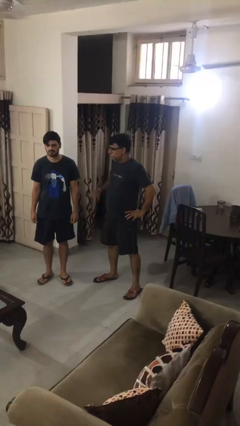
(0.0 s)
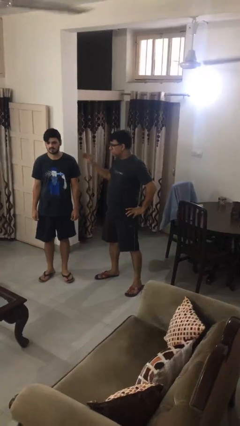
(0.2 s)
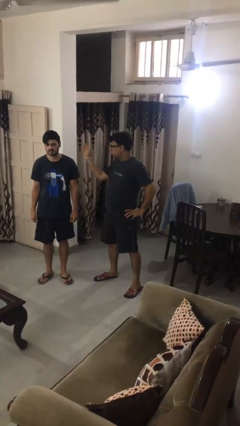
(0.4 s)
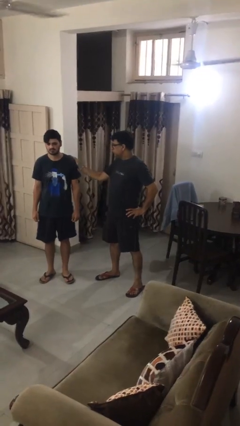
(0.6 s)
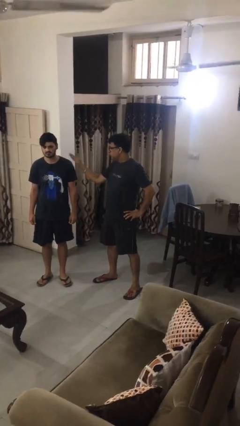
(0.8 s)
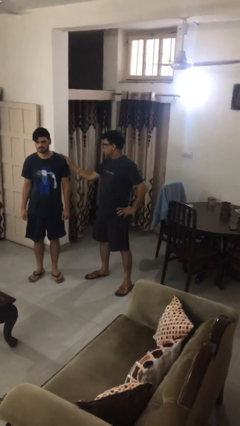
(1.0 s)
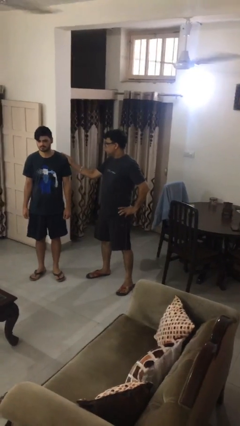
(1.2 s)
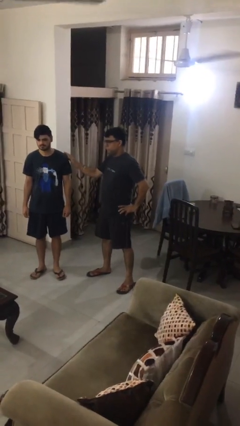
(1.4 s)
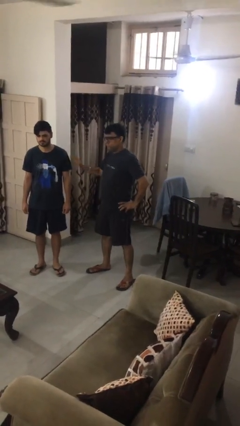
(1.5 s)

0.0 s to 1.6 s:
person pounds shoulders of person

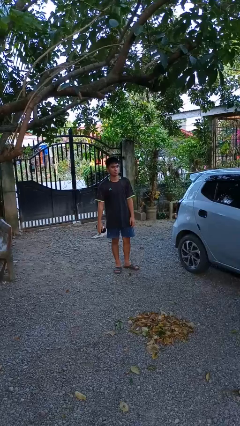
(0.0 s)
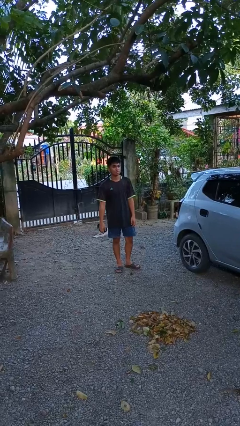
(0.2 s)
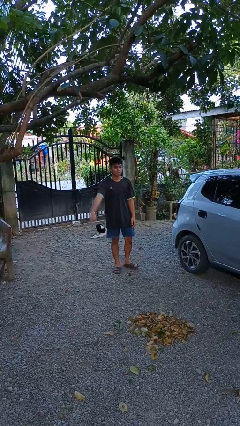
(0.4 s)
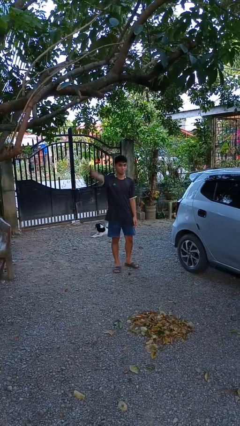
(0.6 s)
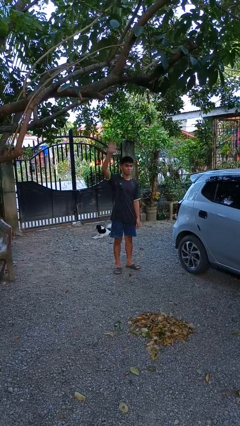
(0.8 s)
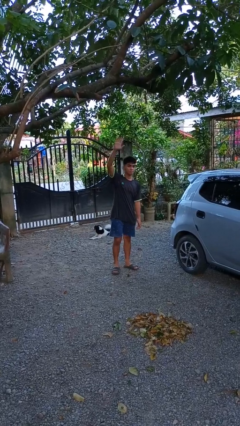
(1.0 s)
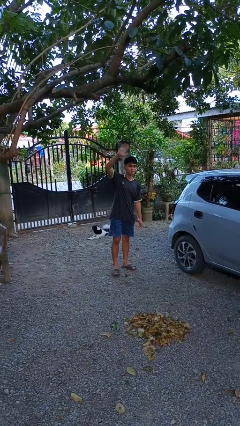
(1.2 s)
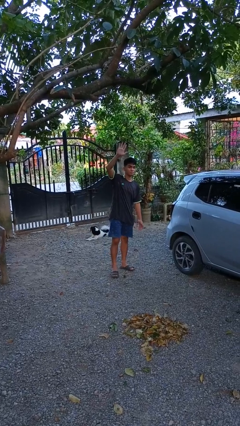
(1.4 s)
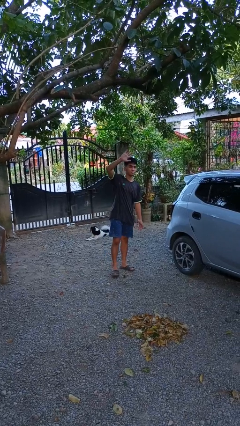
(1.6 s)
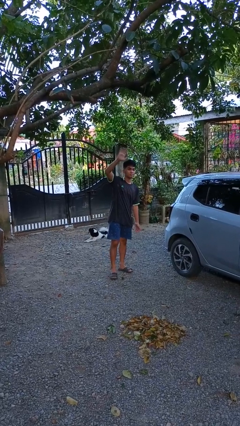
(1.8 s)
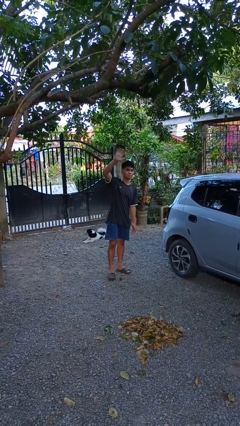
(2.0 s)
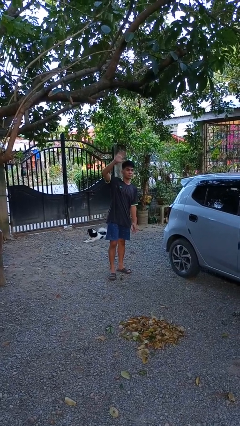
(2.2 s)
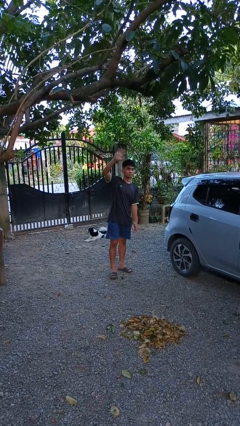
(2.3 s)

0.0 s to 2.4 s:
person waves at person

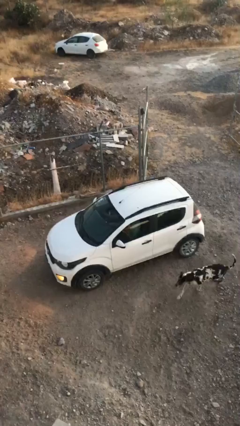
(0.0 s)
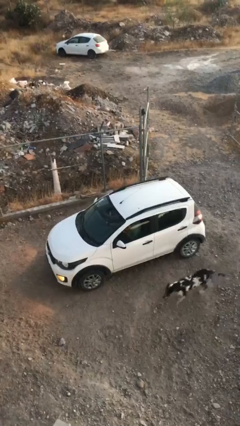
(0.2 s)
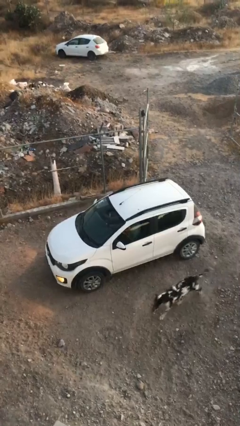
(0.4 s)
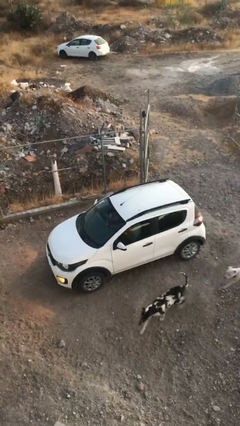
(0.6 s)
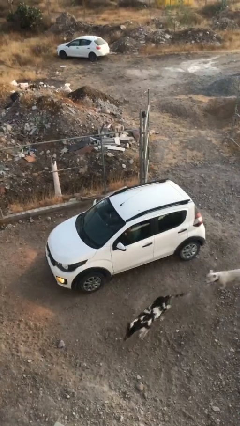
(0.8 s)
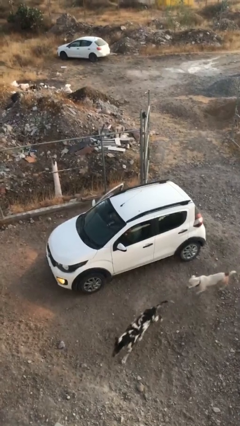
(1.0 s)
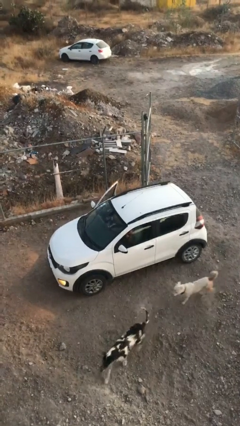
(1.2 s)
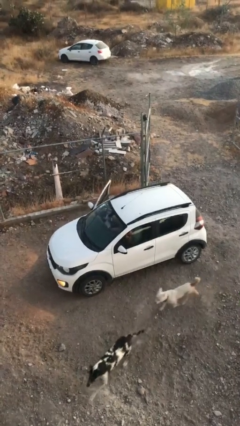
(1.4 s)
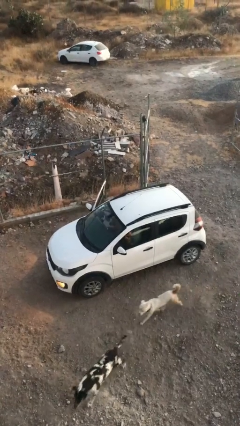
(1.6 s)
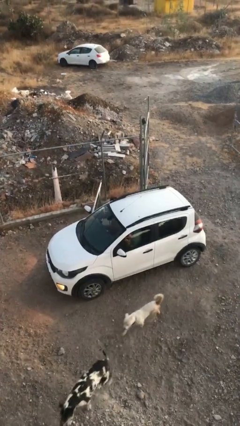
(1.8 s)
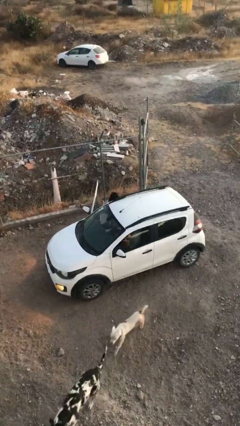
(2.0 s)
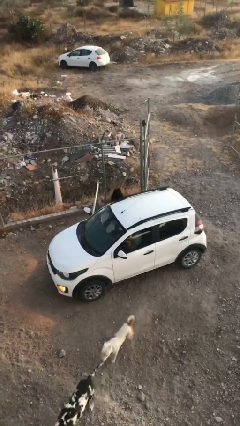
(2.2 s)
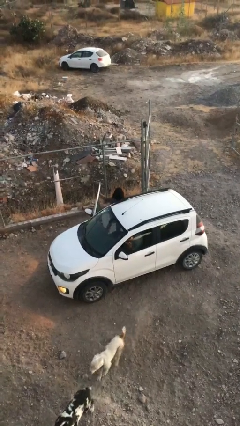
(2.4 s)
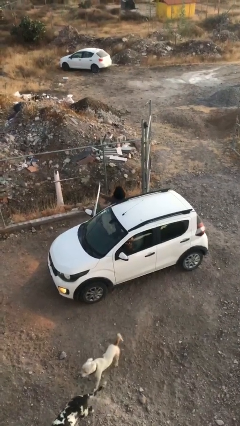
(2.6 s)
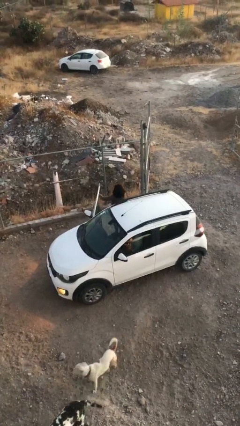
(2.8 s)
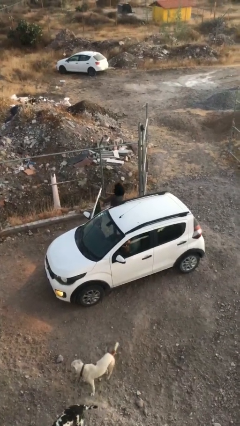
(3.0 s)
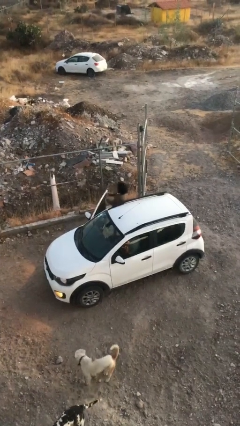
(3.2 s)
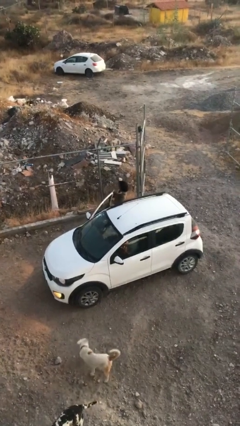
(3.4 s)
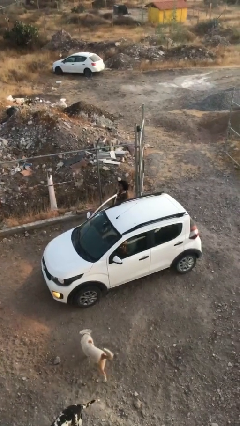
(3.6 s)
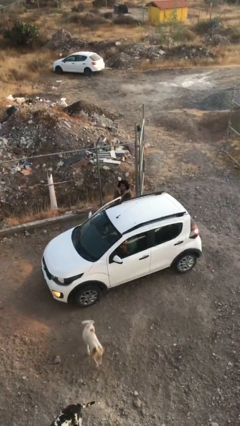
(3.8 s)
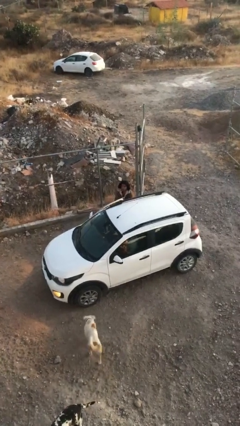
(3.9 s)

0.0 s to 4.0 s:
car drops off person

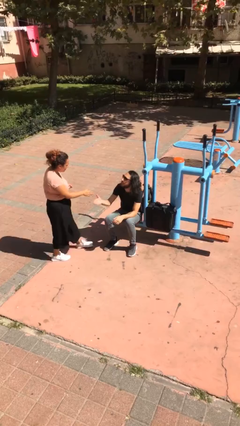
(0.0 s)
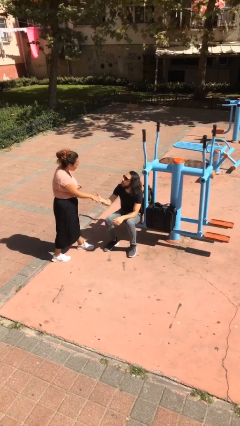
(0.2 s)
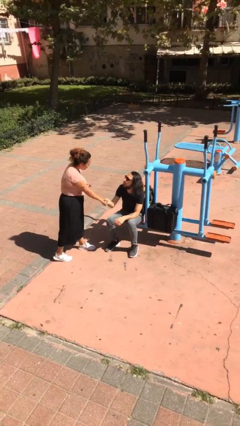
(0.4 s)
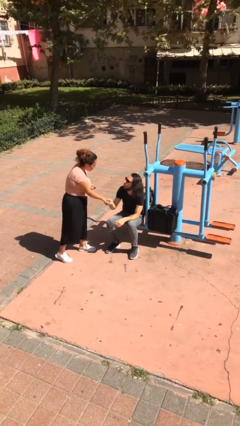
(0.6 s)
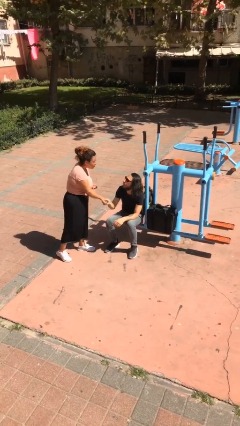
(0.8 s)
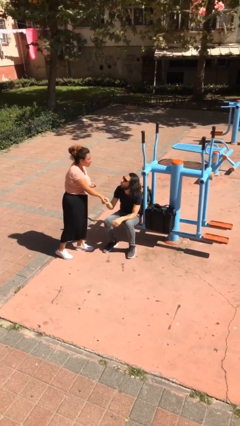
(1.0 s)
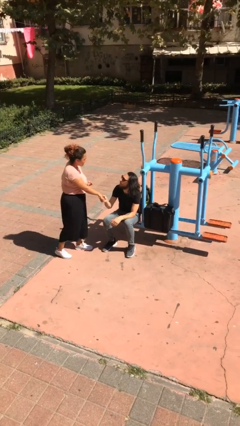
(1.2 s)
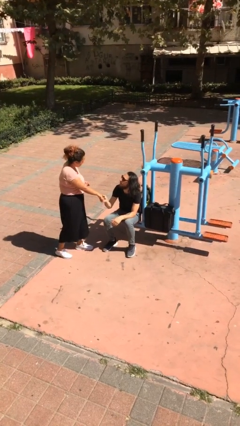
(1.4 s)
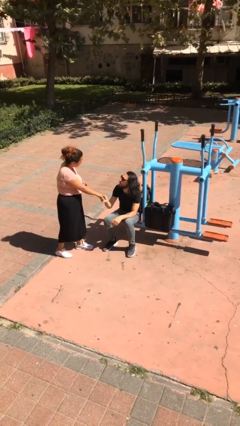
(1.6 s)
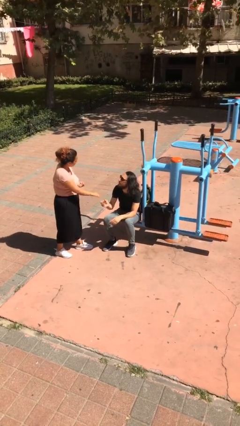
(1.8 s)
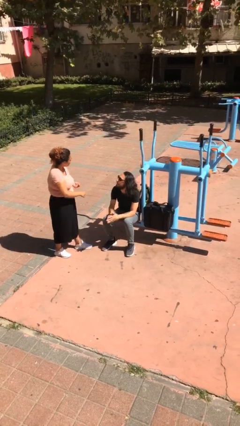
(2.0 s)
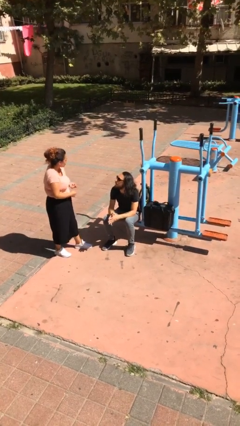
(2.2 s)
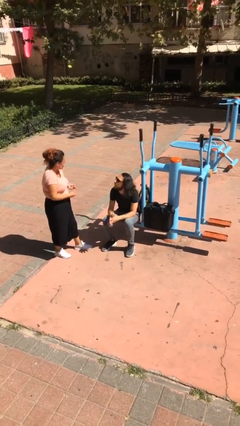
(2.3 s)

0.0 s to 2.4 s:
person shakes hand

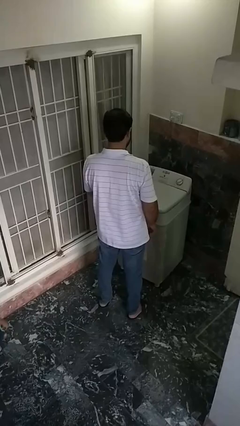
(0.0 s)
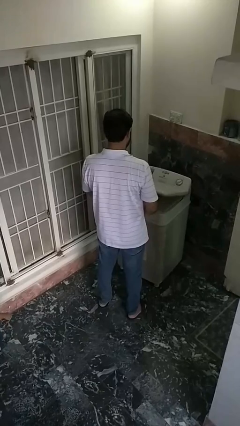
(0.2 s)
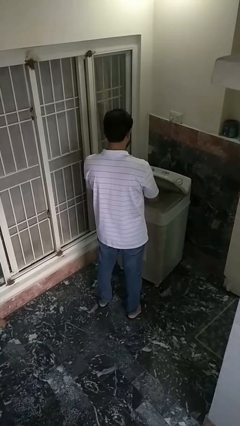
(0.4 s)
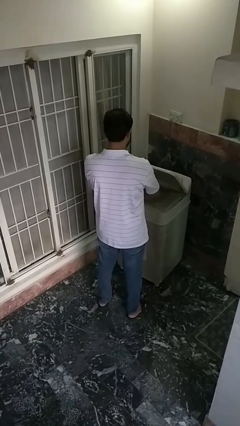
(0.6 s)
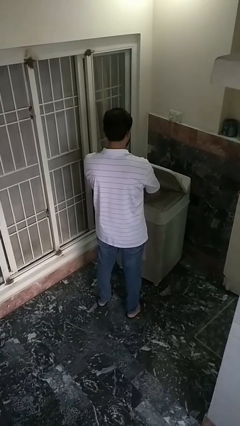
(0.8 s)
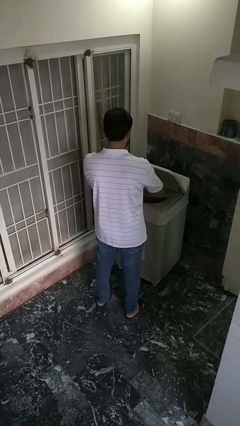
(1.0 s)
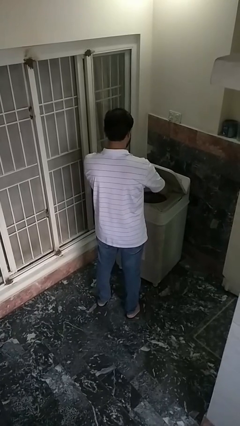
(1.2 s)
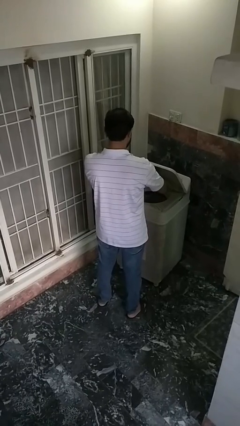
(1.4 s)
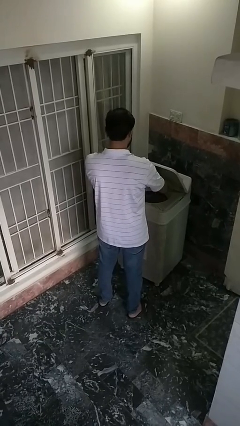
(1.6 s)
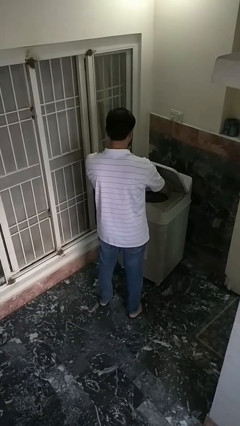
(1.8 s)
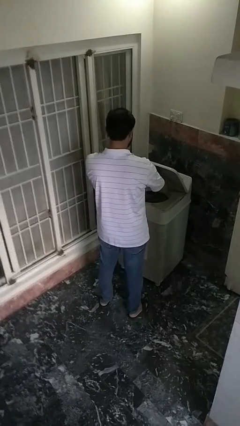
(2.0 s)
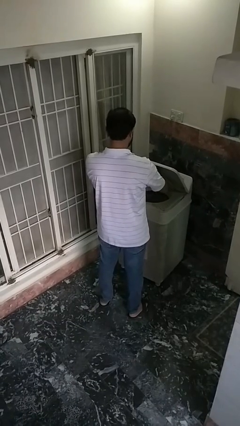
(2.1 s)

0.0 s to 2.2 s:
person opens clothes washer

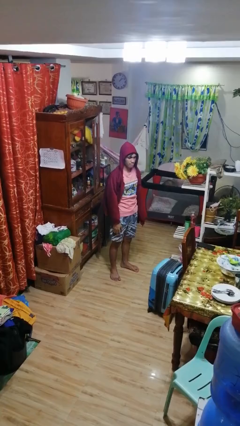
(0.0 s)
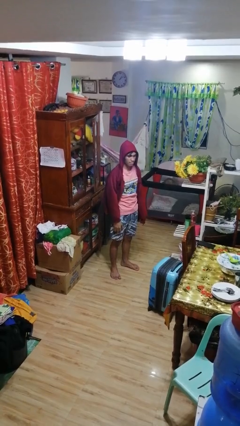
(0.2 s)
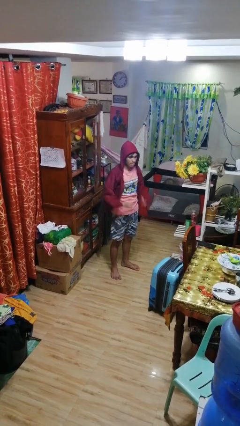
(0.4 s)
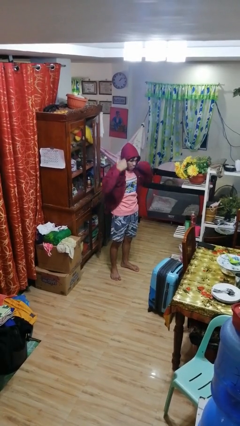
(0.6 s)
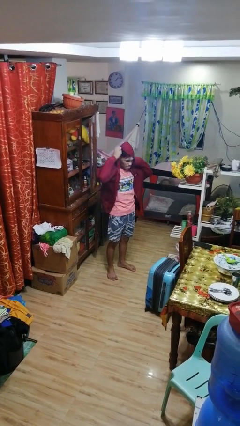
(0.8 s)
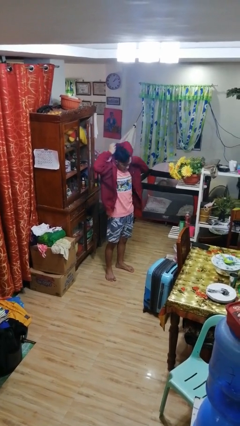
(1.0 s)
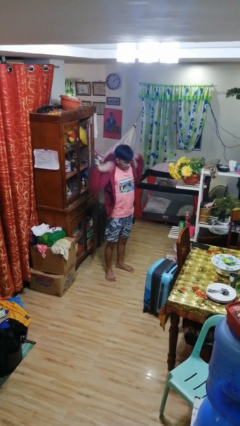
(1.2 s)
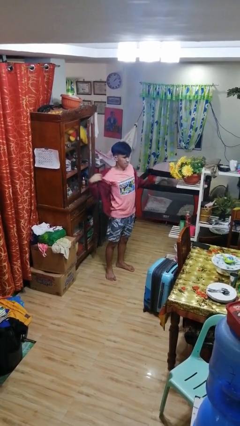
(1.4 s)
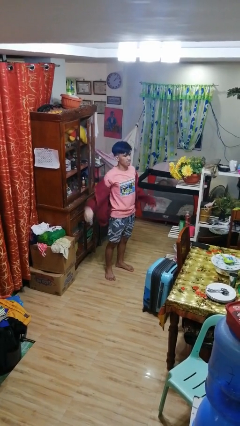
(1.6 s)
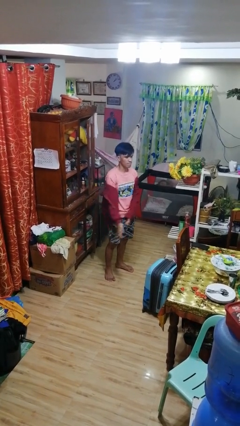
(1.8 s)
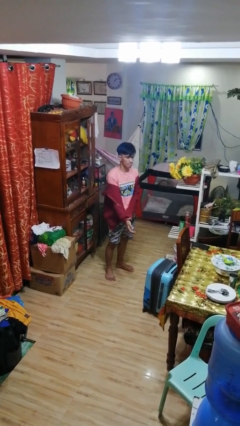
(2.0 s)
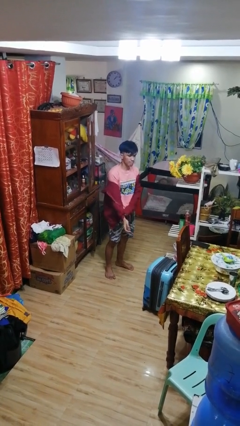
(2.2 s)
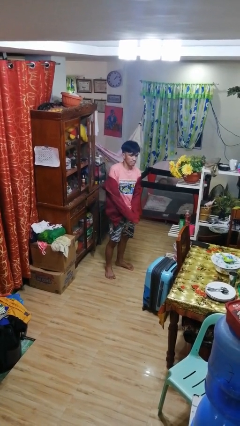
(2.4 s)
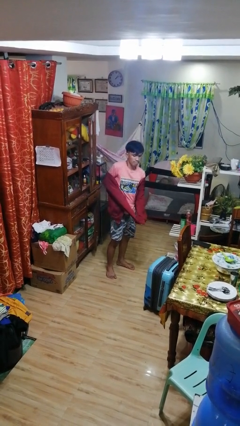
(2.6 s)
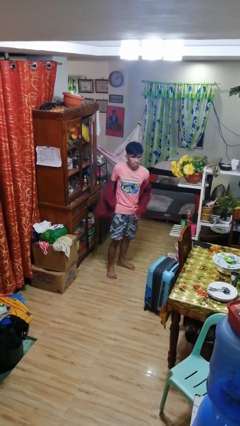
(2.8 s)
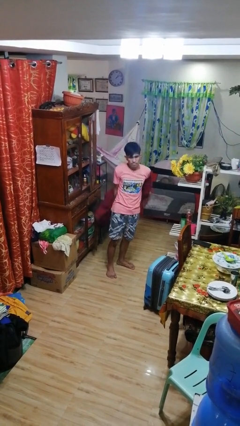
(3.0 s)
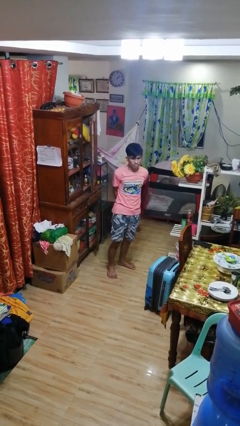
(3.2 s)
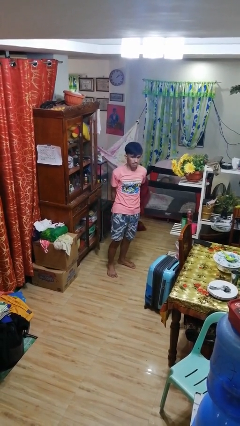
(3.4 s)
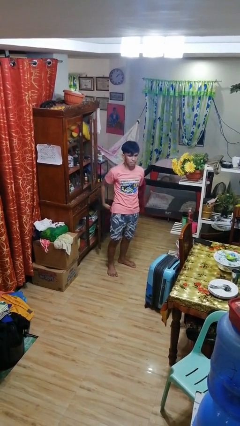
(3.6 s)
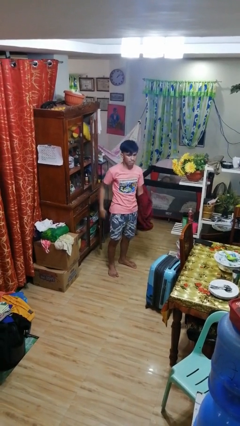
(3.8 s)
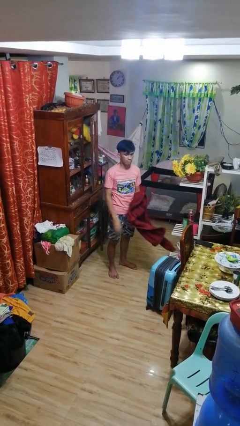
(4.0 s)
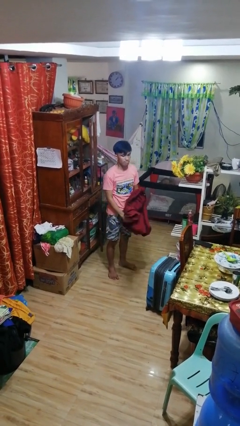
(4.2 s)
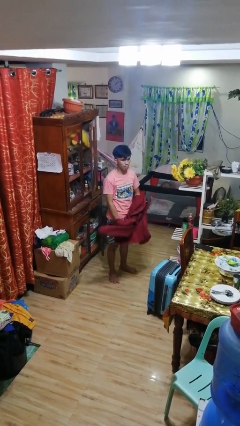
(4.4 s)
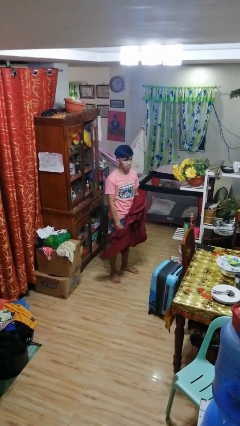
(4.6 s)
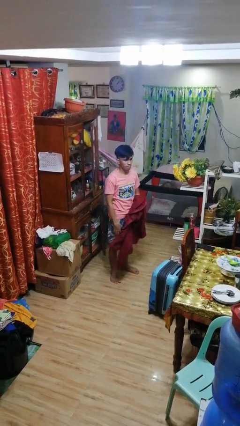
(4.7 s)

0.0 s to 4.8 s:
person takes off hoodie

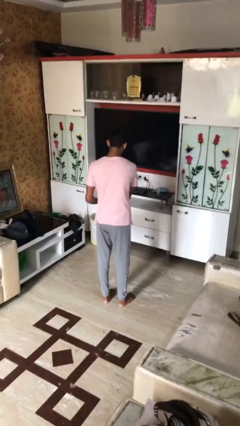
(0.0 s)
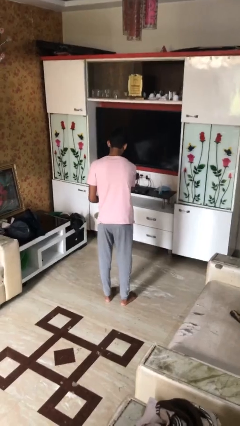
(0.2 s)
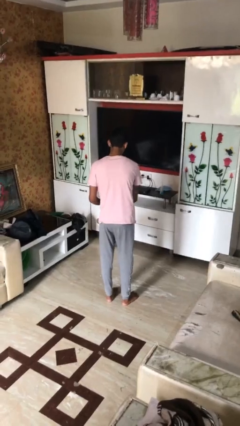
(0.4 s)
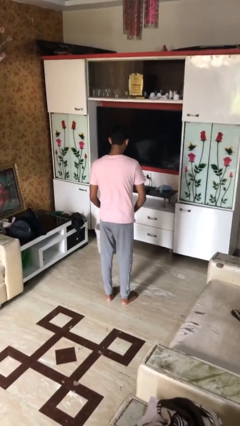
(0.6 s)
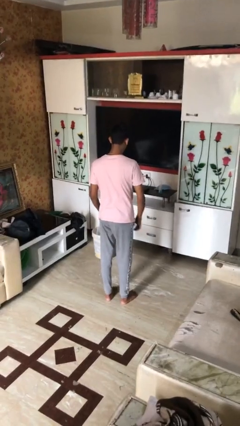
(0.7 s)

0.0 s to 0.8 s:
person puts object into basket
